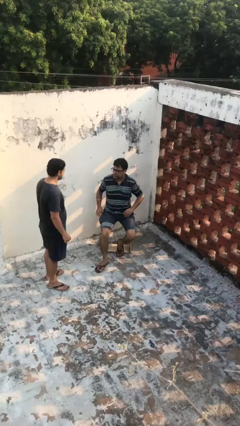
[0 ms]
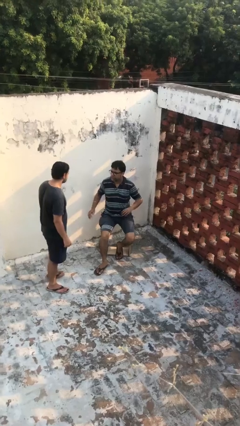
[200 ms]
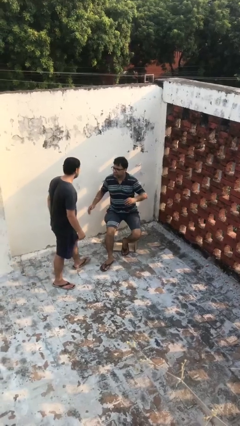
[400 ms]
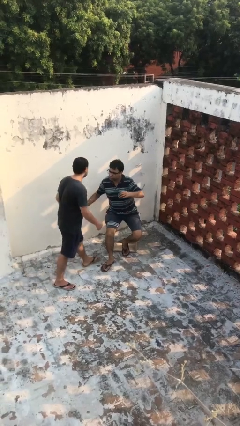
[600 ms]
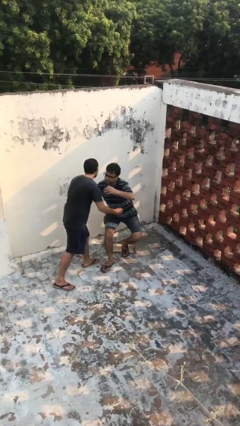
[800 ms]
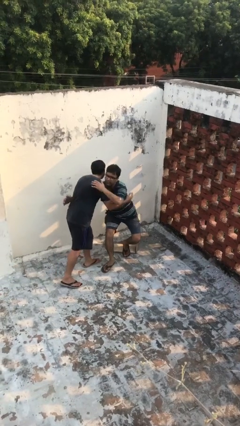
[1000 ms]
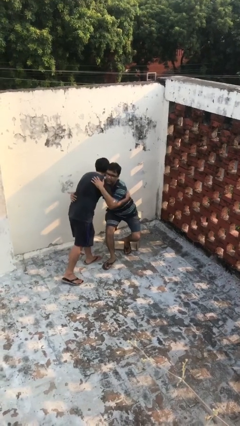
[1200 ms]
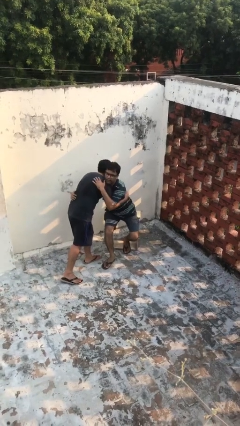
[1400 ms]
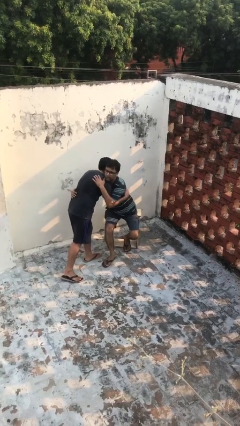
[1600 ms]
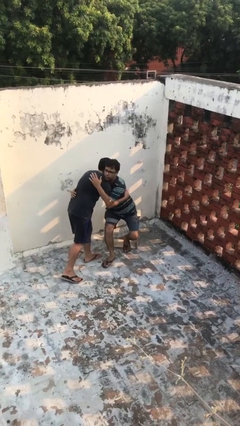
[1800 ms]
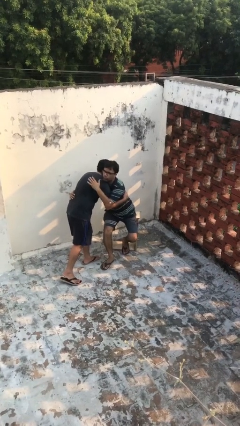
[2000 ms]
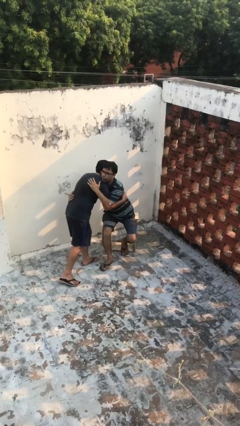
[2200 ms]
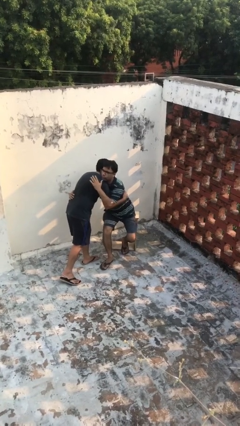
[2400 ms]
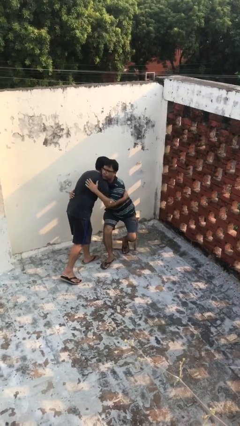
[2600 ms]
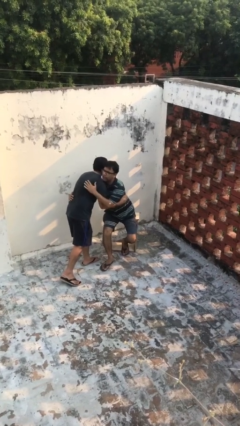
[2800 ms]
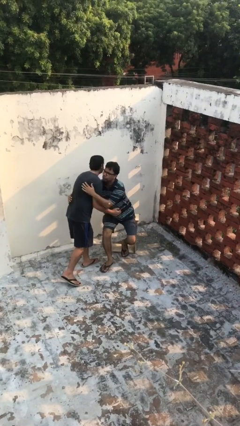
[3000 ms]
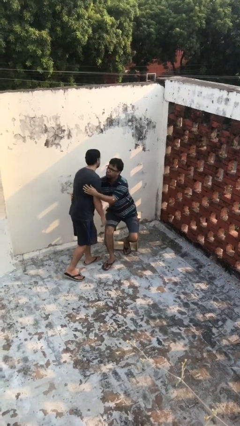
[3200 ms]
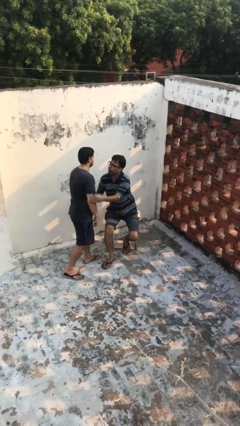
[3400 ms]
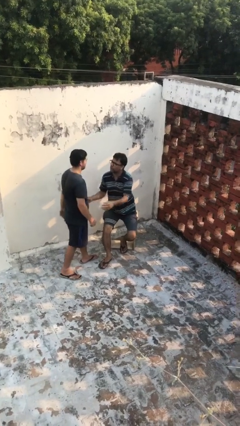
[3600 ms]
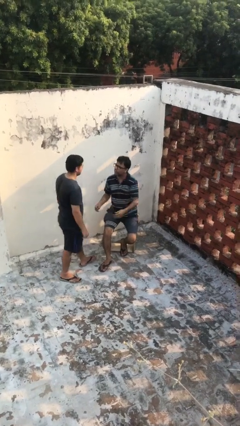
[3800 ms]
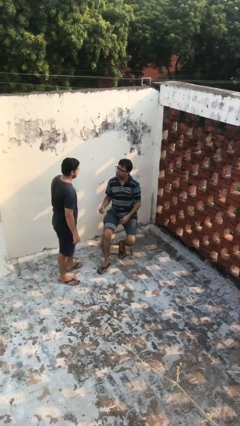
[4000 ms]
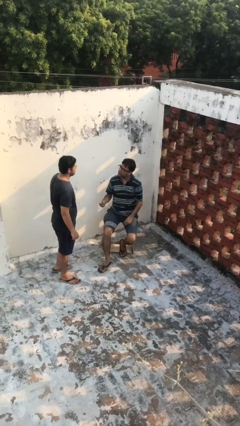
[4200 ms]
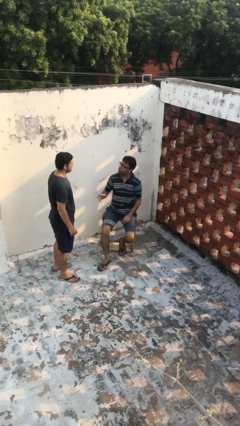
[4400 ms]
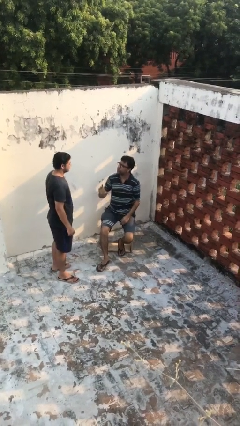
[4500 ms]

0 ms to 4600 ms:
person embraces person

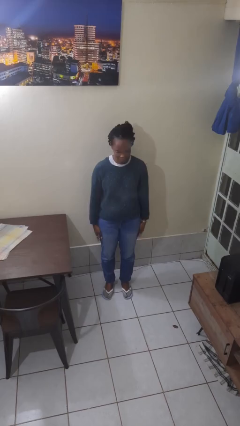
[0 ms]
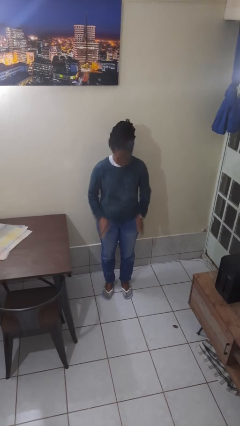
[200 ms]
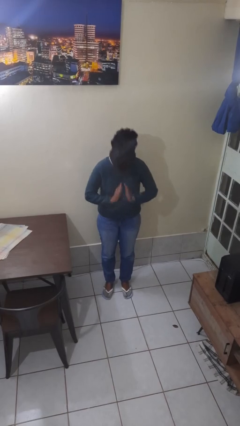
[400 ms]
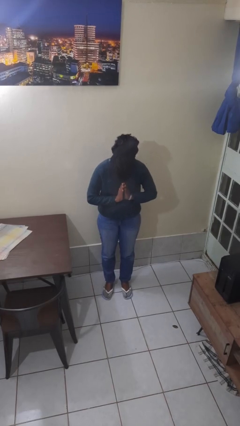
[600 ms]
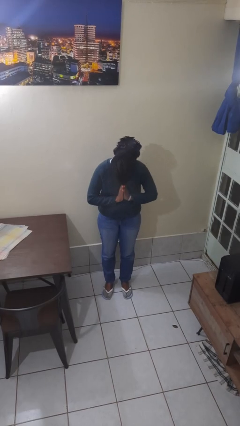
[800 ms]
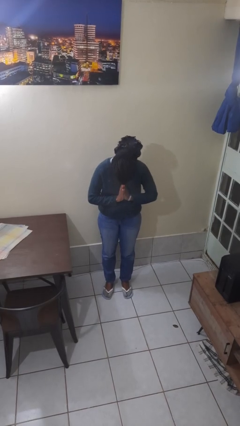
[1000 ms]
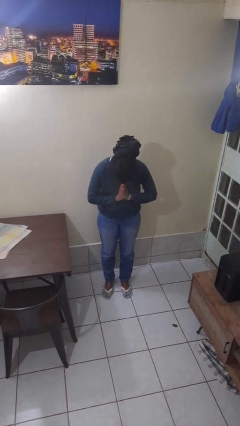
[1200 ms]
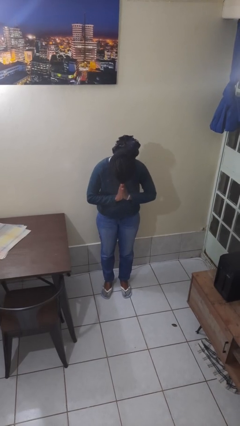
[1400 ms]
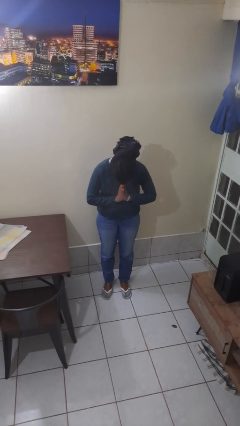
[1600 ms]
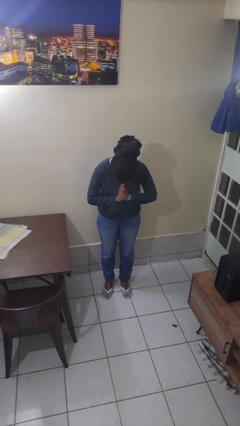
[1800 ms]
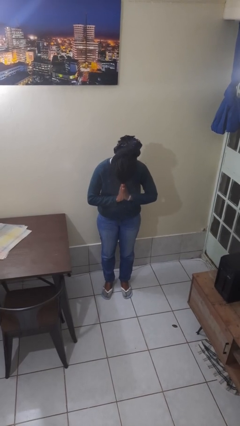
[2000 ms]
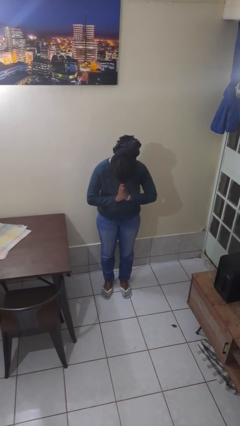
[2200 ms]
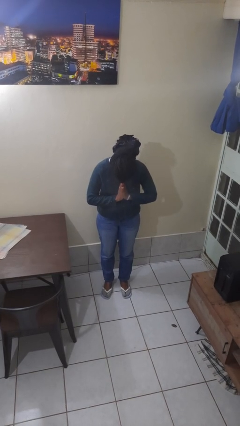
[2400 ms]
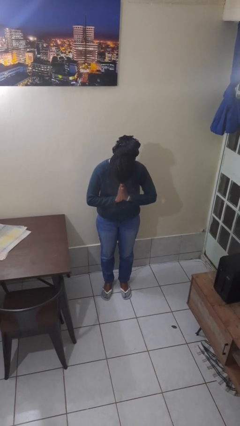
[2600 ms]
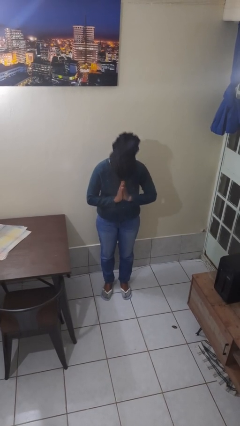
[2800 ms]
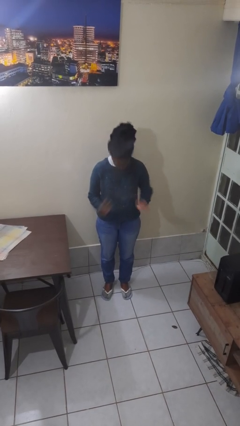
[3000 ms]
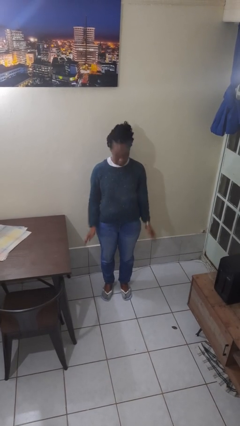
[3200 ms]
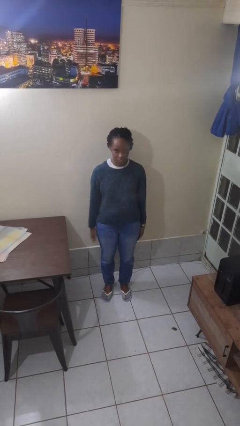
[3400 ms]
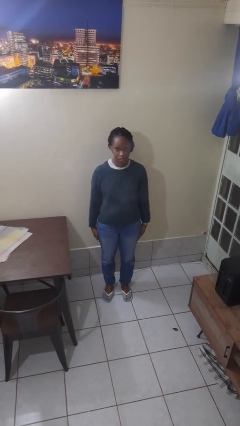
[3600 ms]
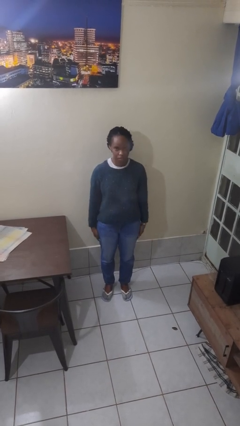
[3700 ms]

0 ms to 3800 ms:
person prays

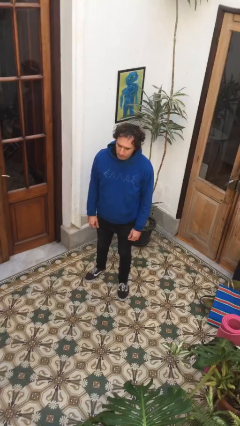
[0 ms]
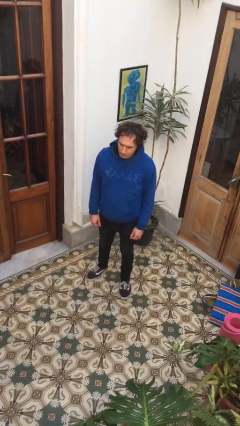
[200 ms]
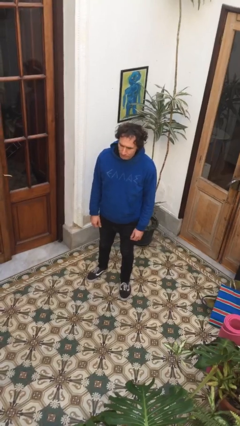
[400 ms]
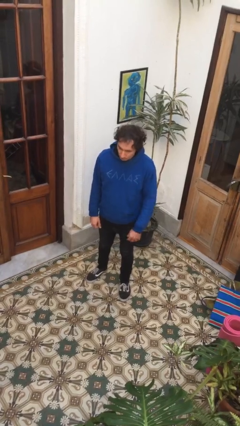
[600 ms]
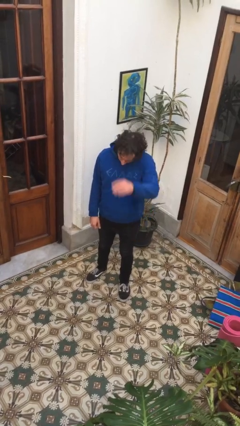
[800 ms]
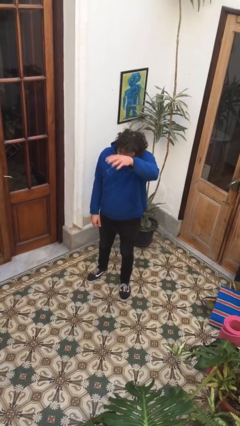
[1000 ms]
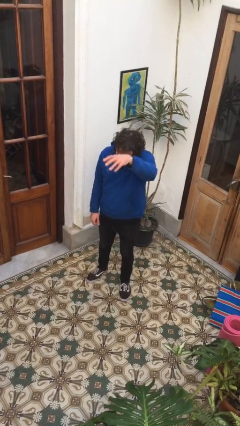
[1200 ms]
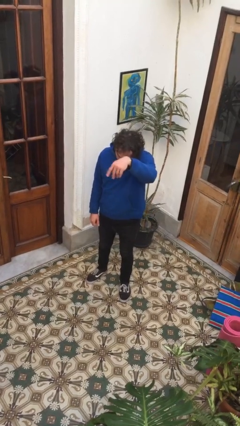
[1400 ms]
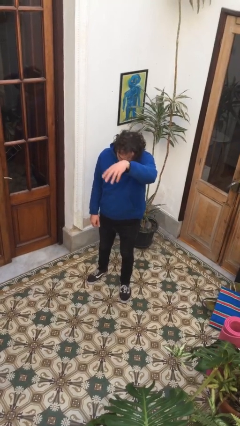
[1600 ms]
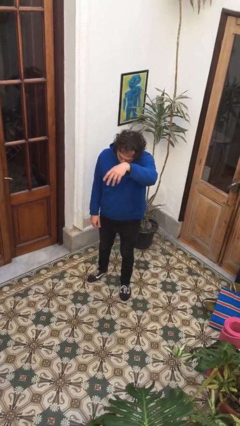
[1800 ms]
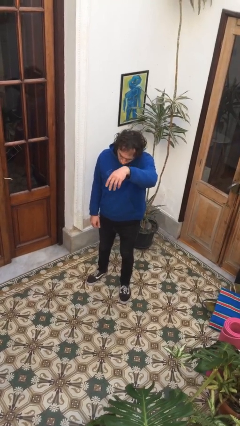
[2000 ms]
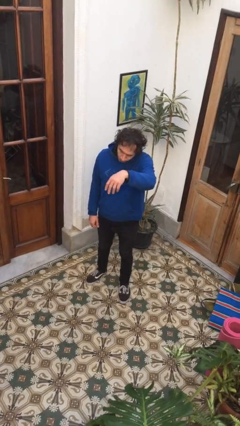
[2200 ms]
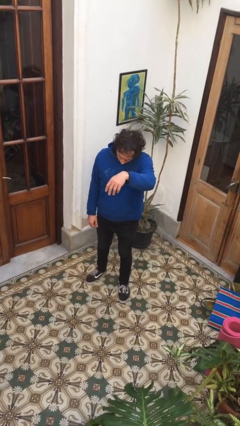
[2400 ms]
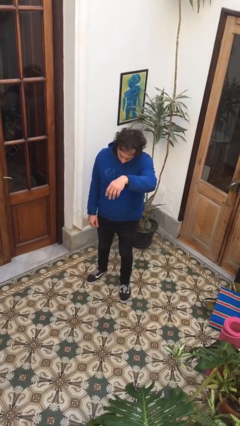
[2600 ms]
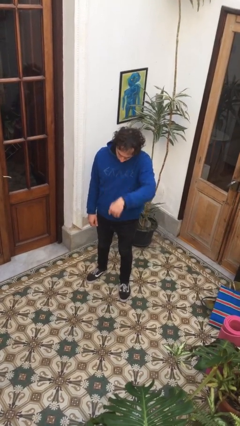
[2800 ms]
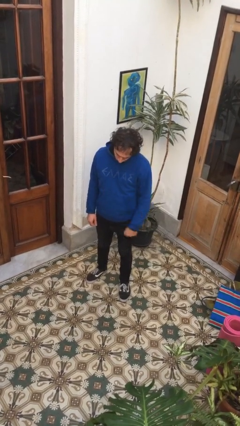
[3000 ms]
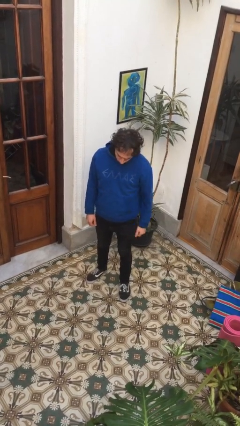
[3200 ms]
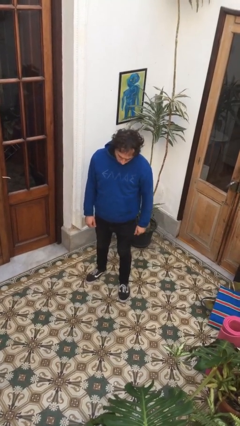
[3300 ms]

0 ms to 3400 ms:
person gestures come here

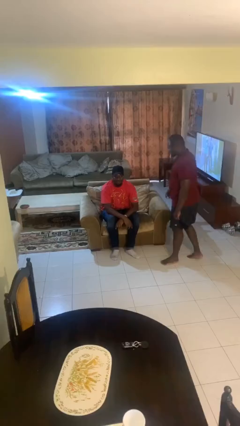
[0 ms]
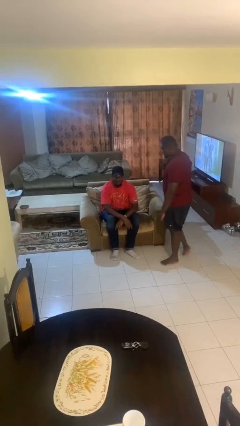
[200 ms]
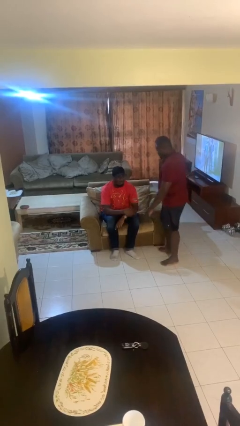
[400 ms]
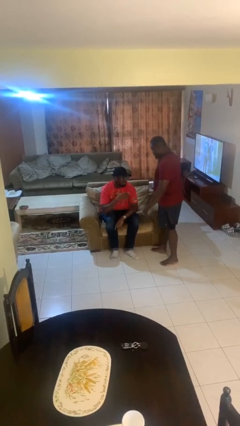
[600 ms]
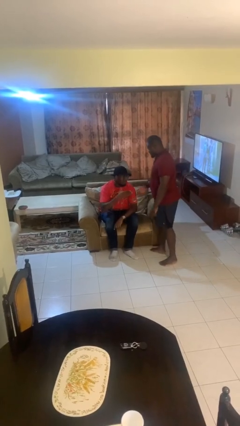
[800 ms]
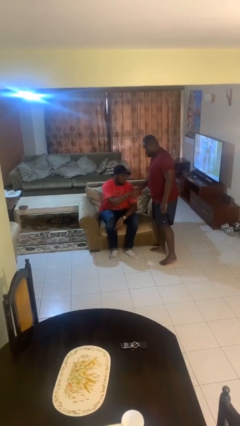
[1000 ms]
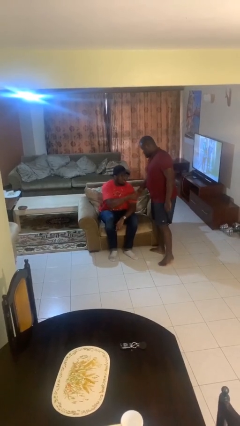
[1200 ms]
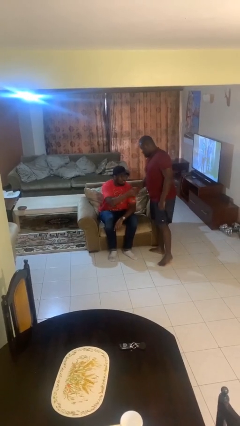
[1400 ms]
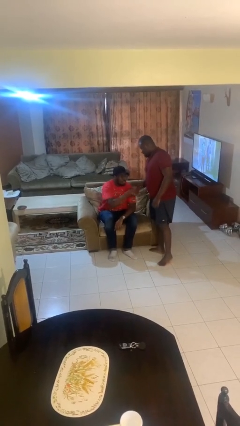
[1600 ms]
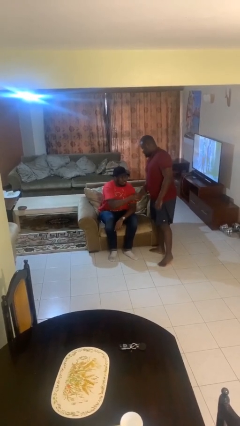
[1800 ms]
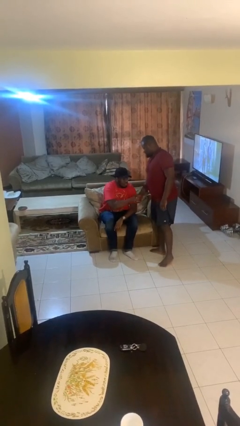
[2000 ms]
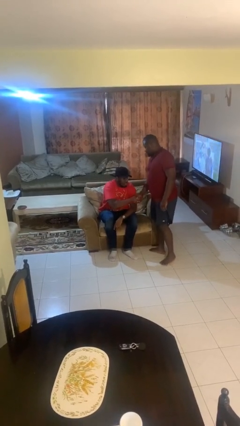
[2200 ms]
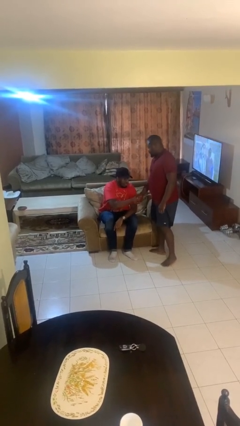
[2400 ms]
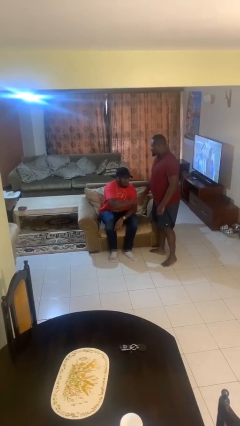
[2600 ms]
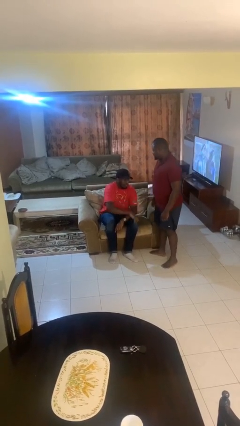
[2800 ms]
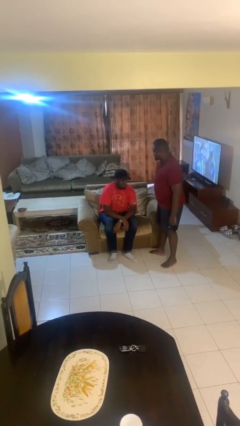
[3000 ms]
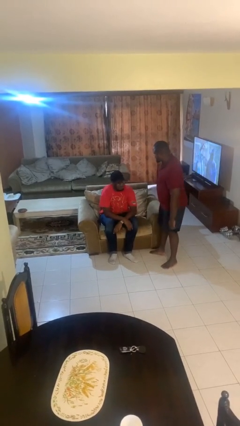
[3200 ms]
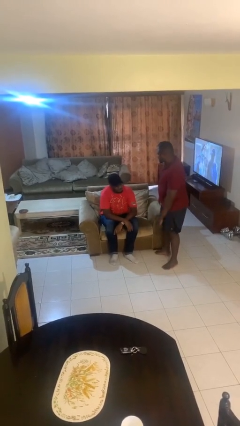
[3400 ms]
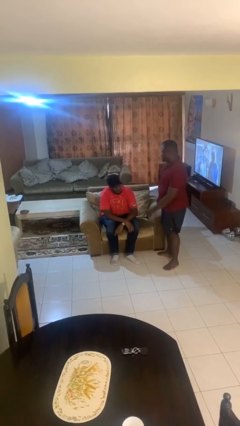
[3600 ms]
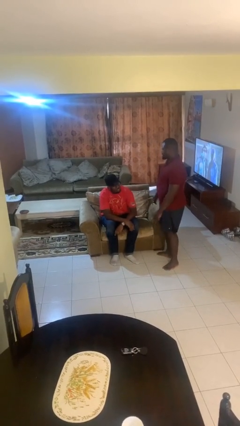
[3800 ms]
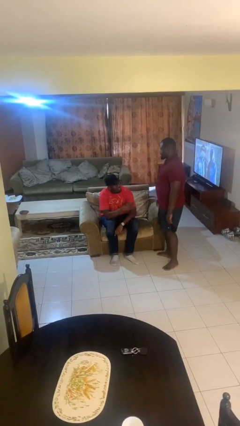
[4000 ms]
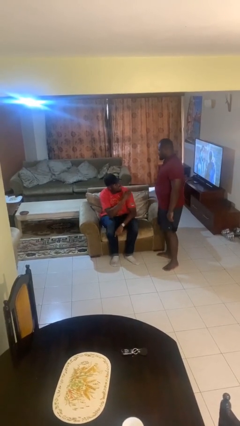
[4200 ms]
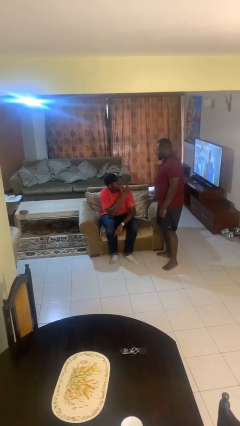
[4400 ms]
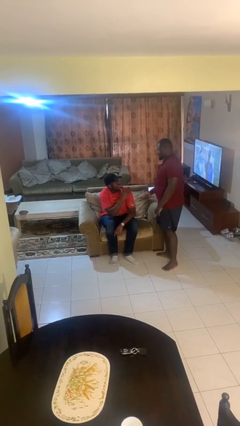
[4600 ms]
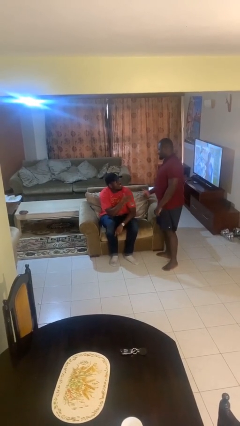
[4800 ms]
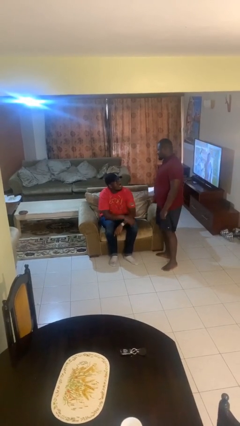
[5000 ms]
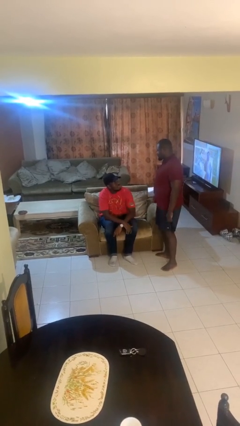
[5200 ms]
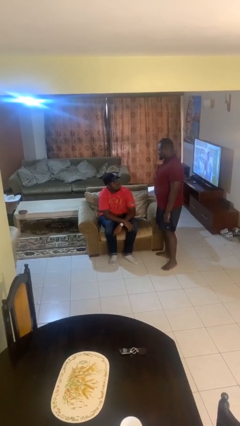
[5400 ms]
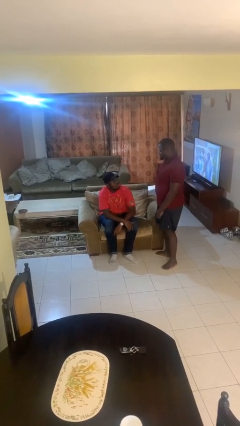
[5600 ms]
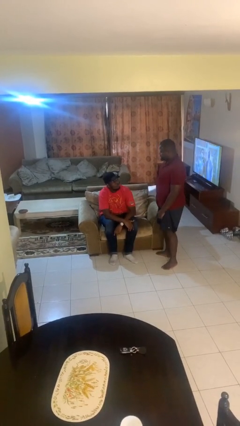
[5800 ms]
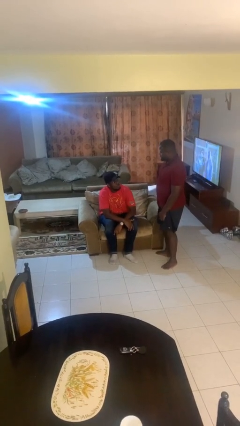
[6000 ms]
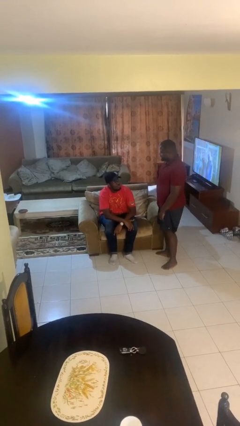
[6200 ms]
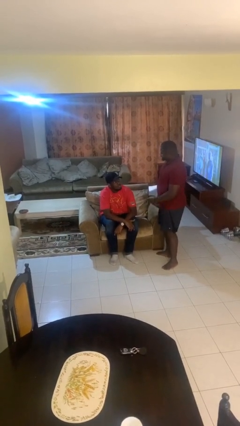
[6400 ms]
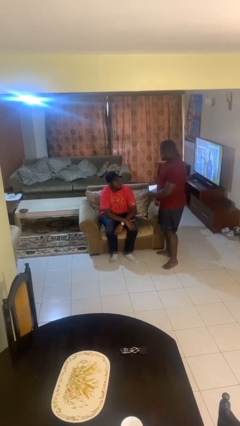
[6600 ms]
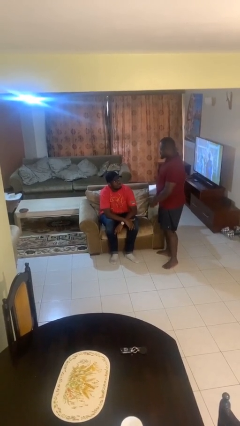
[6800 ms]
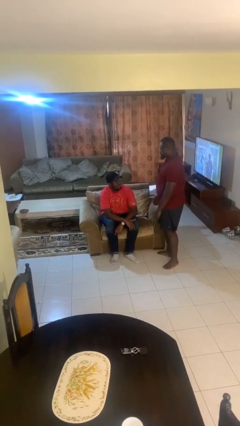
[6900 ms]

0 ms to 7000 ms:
person shakes hand
